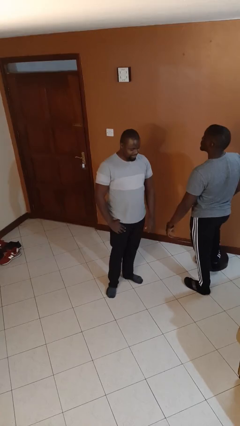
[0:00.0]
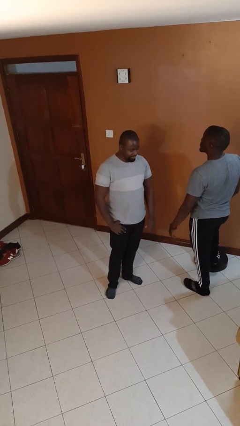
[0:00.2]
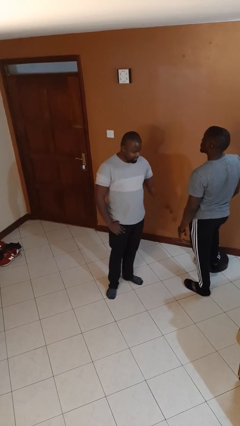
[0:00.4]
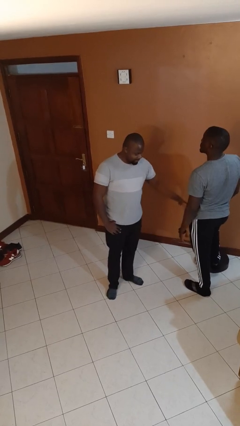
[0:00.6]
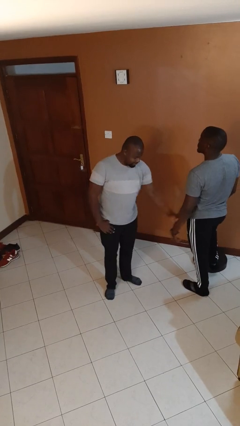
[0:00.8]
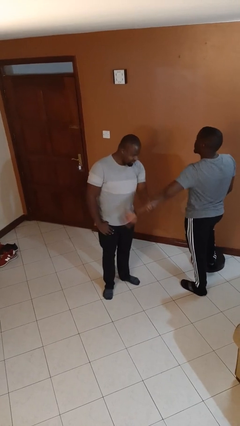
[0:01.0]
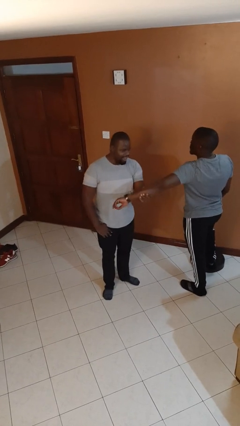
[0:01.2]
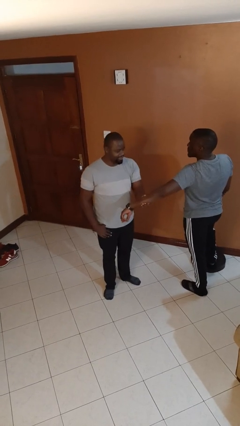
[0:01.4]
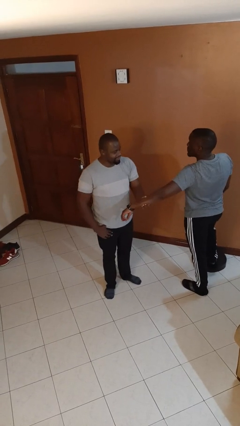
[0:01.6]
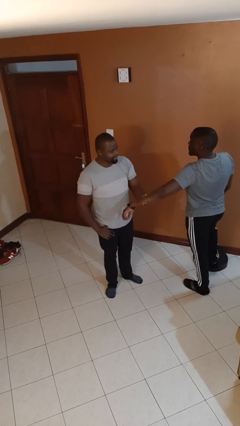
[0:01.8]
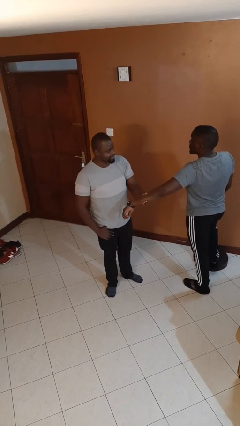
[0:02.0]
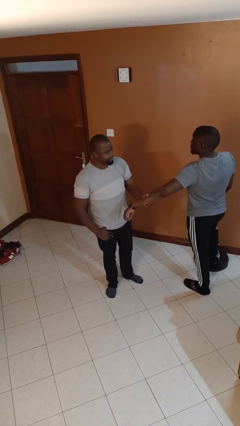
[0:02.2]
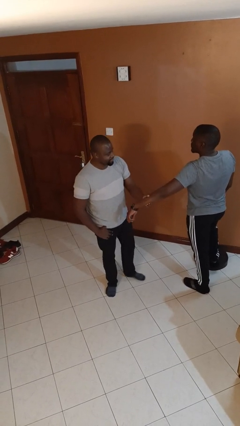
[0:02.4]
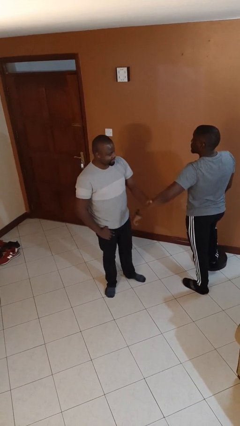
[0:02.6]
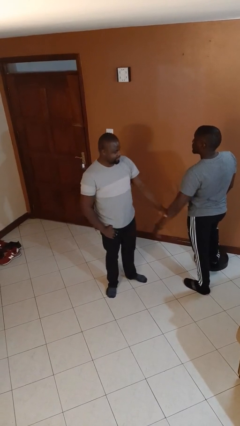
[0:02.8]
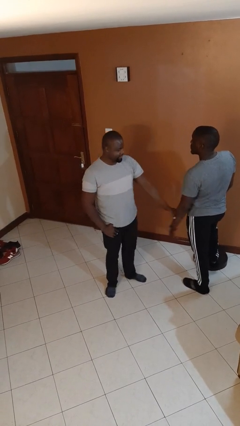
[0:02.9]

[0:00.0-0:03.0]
person grabs person by forearm

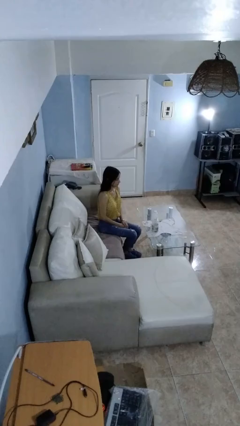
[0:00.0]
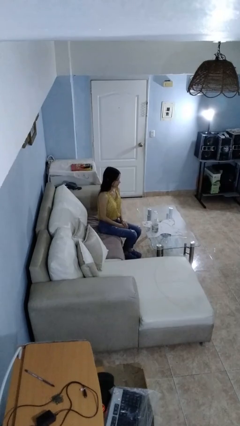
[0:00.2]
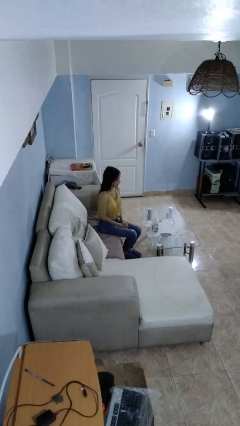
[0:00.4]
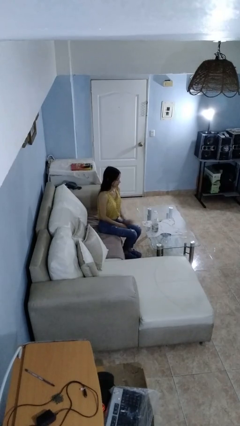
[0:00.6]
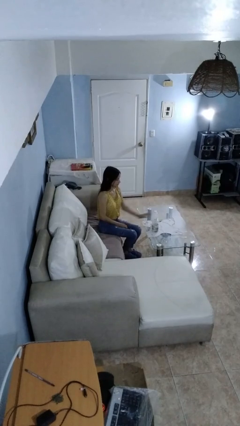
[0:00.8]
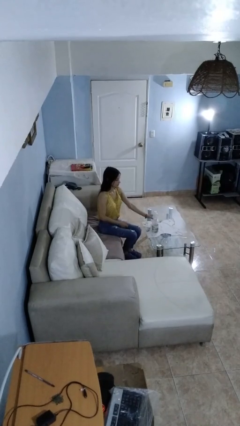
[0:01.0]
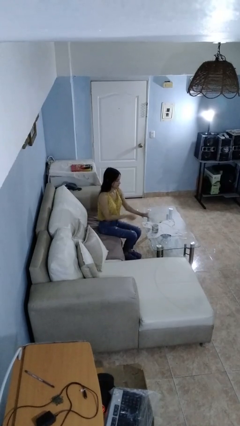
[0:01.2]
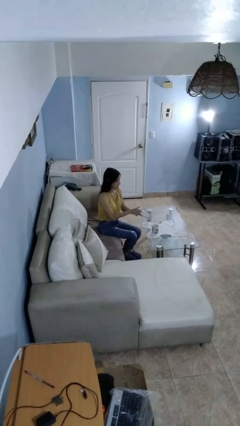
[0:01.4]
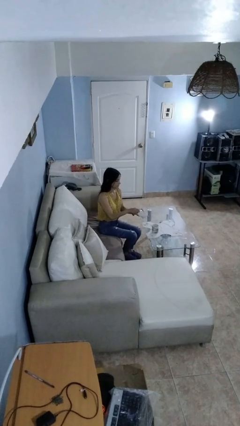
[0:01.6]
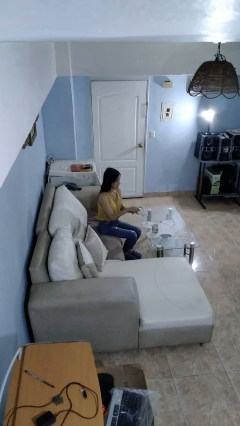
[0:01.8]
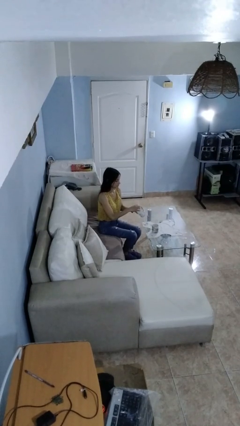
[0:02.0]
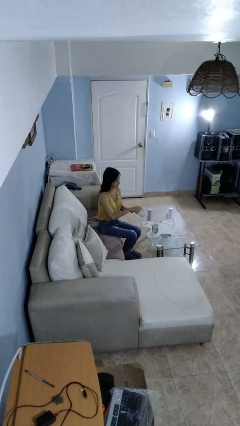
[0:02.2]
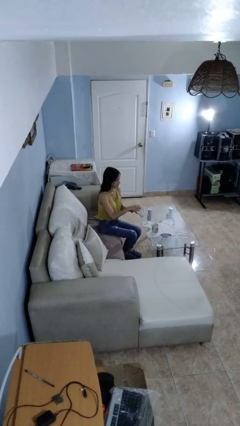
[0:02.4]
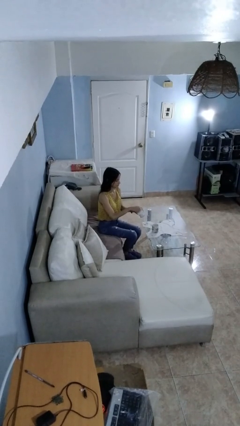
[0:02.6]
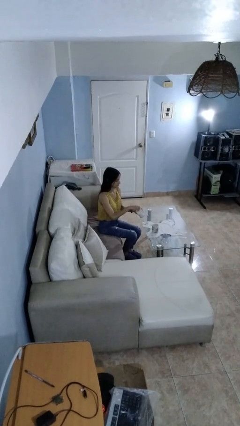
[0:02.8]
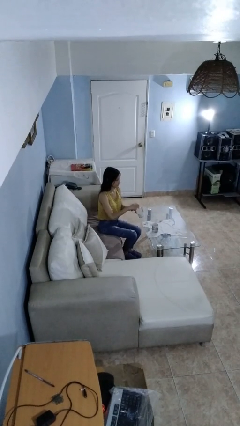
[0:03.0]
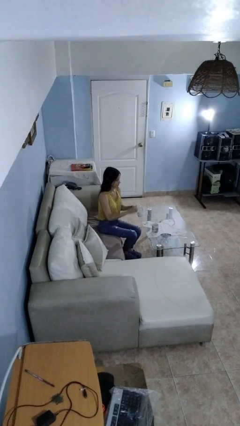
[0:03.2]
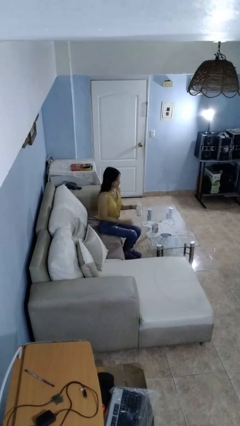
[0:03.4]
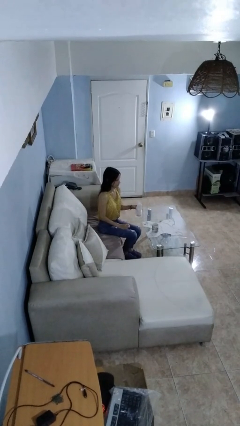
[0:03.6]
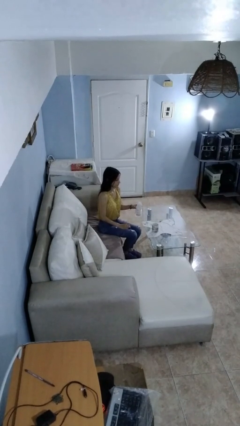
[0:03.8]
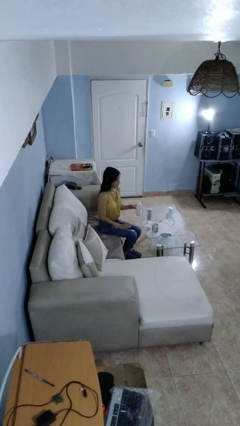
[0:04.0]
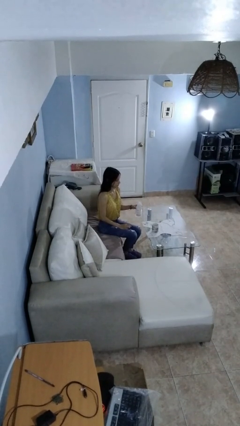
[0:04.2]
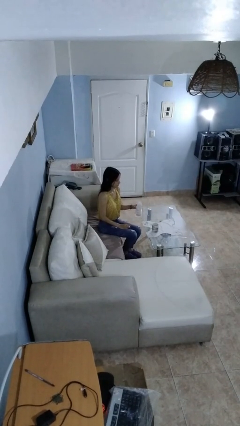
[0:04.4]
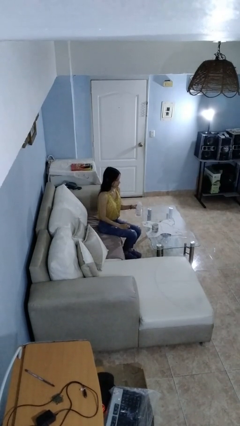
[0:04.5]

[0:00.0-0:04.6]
person unscrews lid from bottle

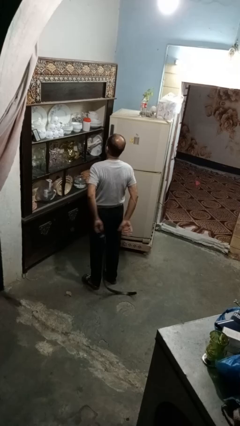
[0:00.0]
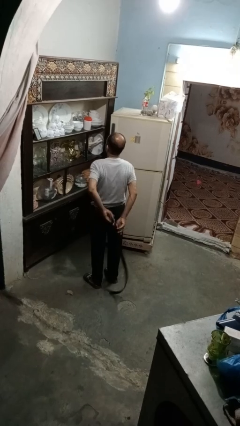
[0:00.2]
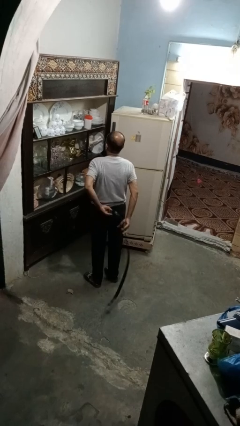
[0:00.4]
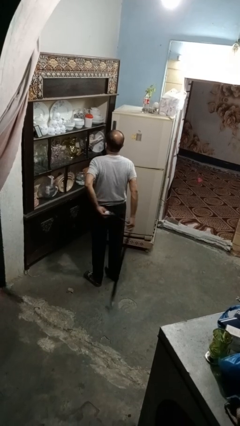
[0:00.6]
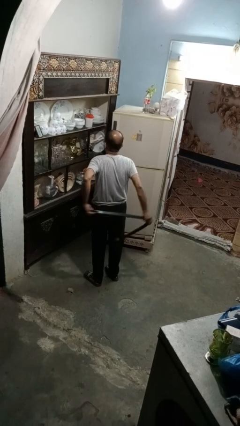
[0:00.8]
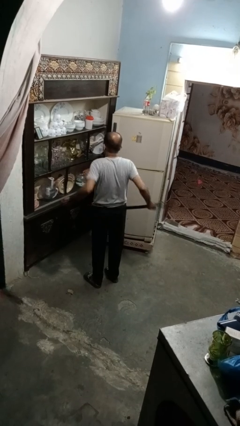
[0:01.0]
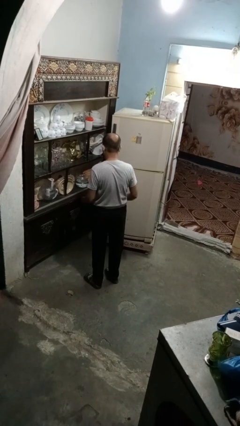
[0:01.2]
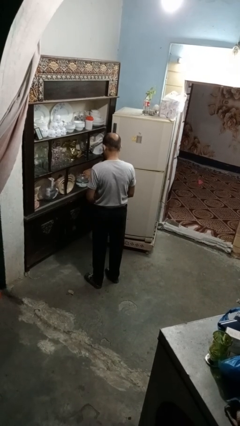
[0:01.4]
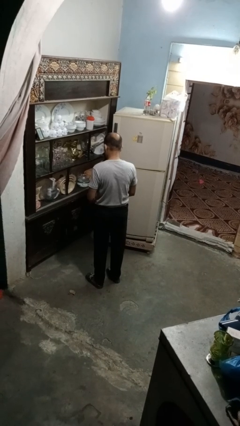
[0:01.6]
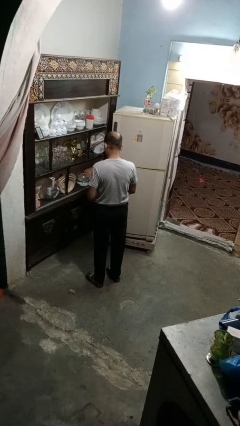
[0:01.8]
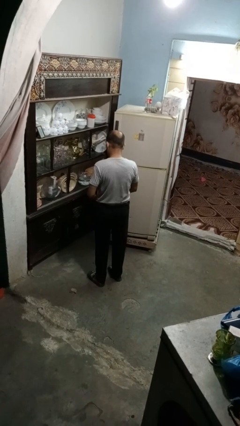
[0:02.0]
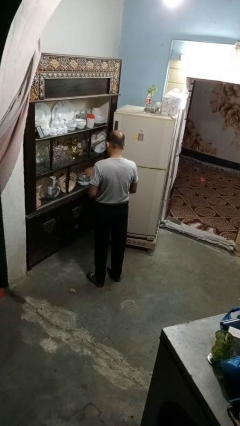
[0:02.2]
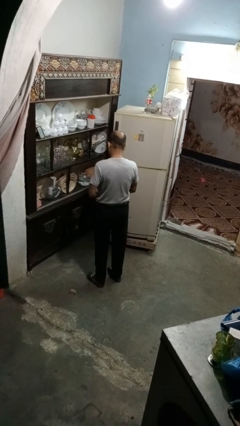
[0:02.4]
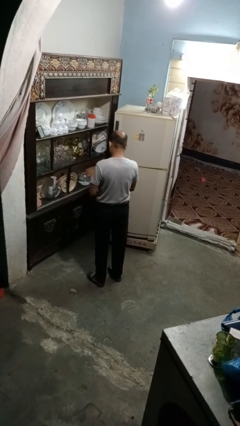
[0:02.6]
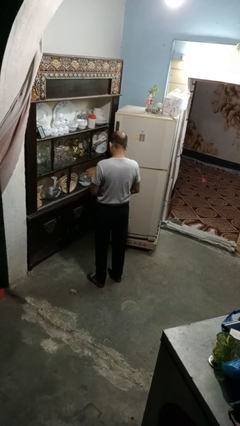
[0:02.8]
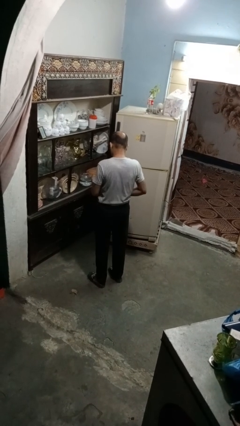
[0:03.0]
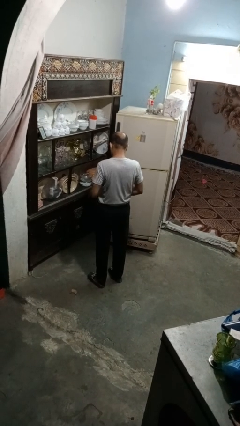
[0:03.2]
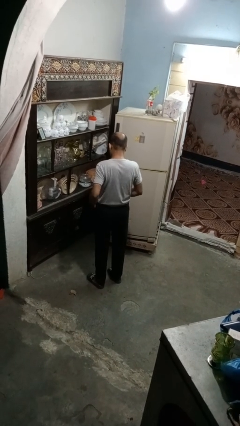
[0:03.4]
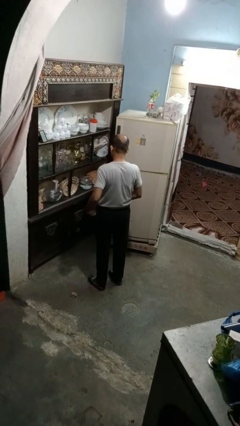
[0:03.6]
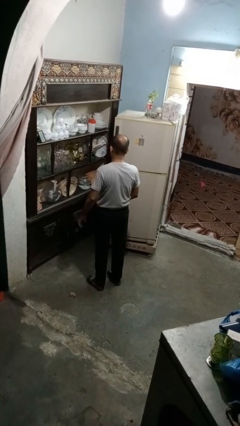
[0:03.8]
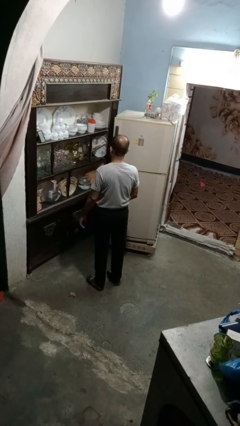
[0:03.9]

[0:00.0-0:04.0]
person puts on belt

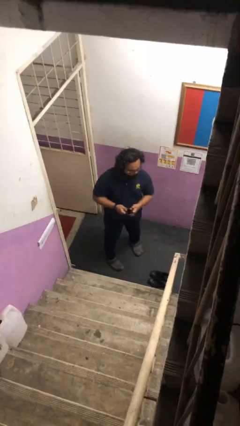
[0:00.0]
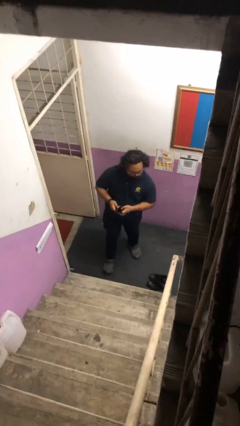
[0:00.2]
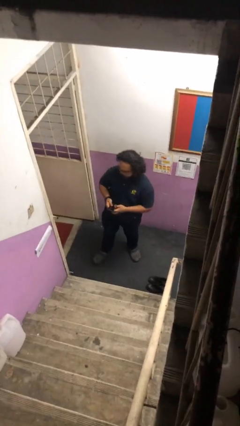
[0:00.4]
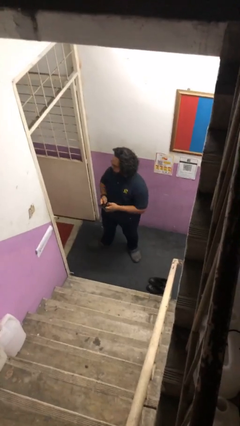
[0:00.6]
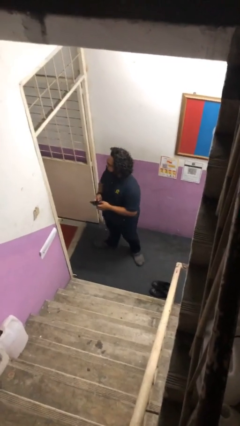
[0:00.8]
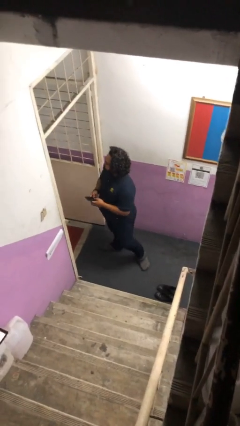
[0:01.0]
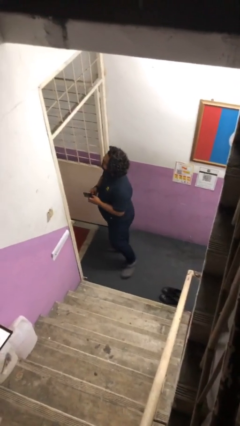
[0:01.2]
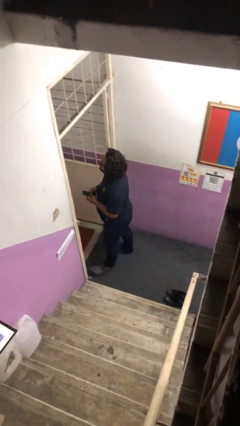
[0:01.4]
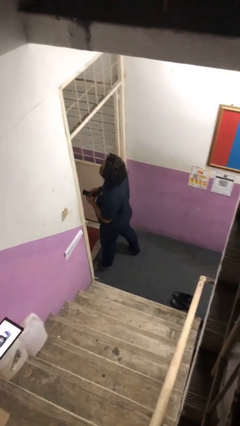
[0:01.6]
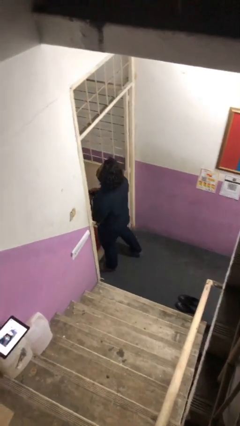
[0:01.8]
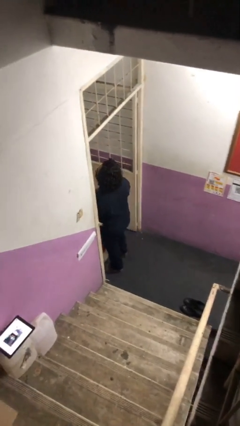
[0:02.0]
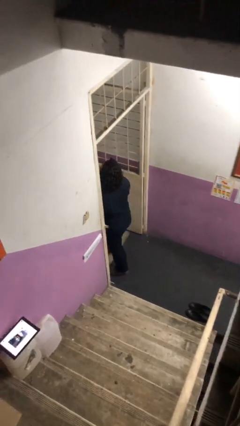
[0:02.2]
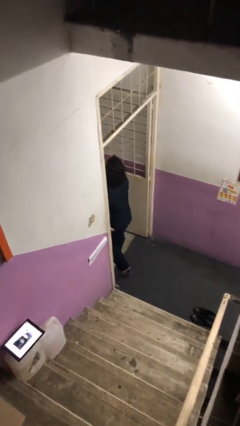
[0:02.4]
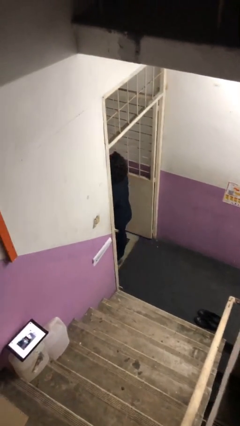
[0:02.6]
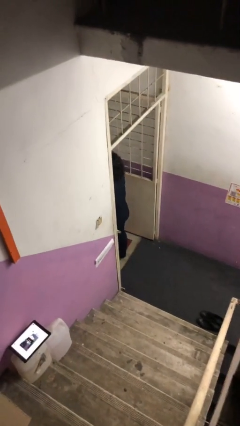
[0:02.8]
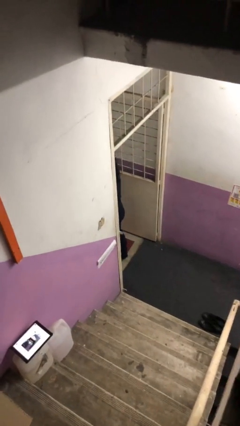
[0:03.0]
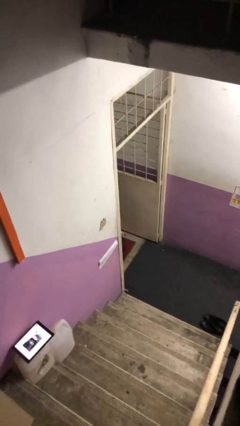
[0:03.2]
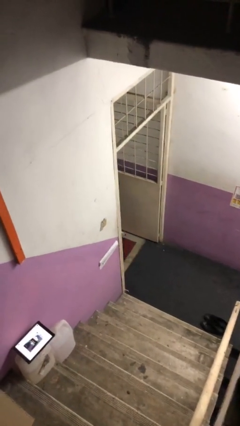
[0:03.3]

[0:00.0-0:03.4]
person exits scene through structure

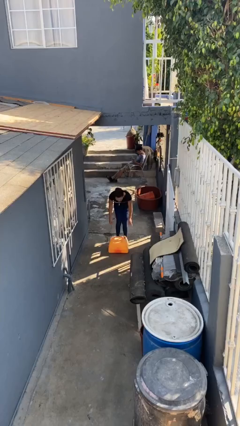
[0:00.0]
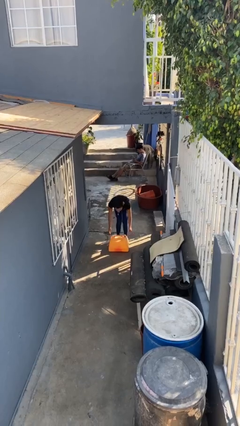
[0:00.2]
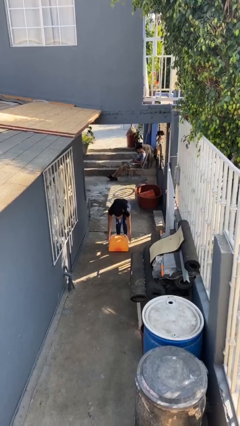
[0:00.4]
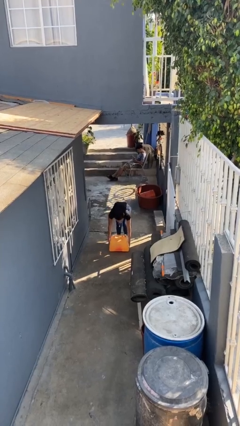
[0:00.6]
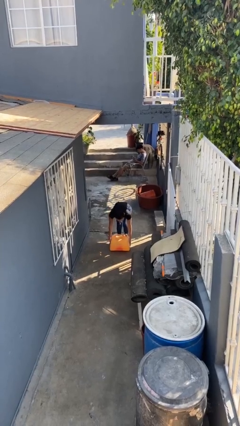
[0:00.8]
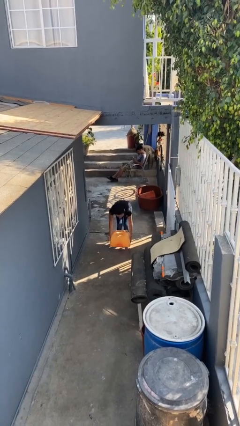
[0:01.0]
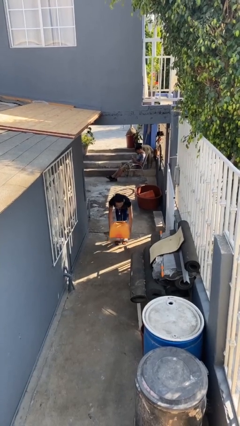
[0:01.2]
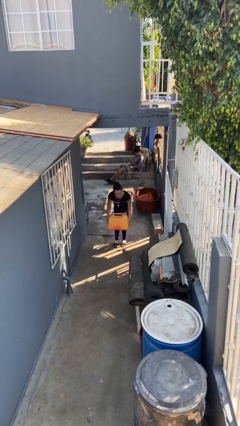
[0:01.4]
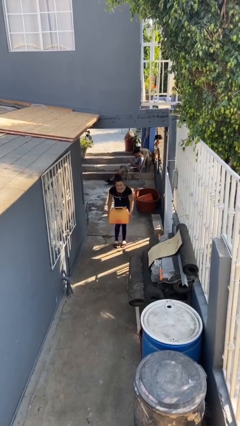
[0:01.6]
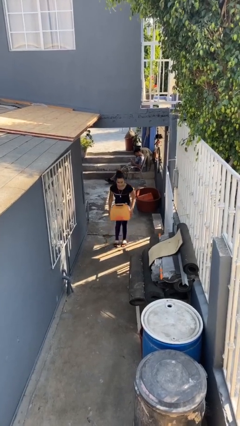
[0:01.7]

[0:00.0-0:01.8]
person picks up object from floor

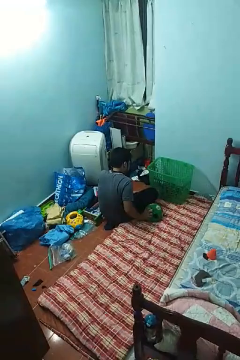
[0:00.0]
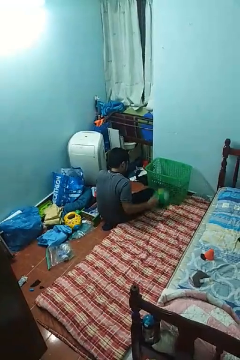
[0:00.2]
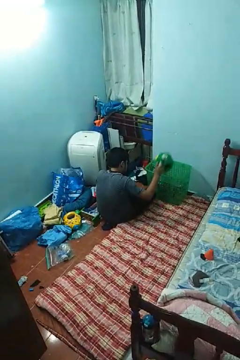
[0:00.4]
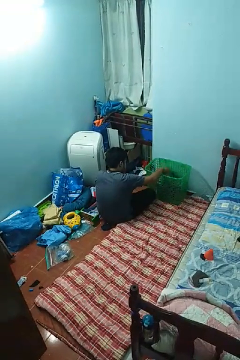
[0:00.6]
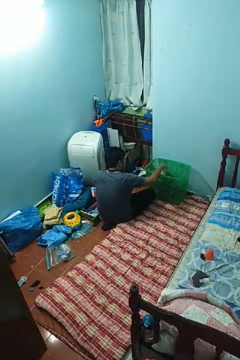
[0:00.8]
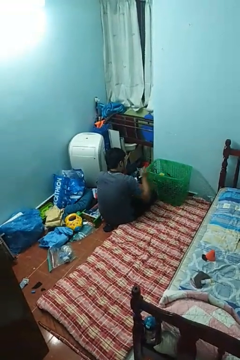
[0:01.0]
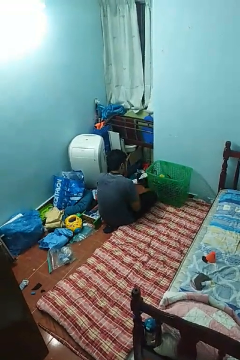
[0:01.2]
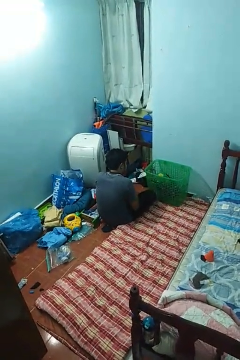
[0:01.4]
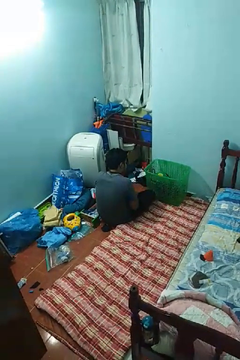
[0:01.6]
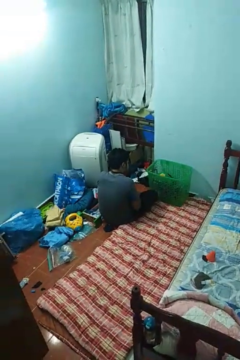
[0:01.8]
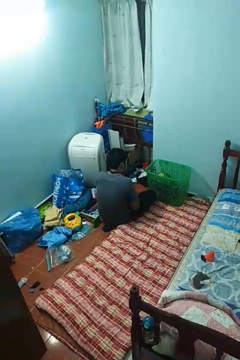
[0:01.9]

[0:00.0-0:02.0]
person puts object into basket
